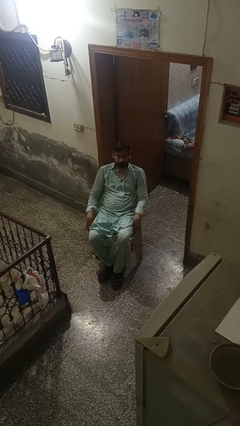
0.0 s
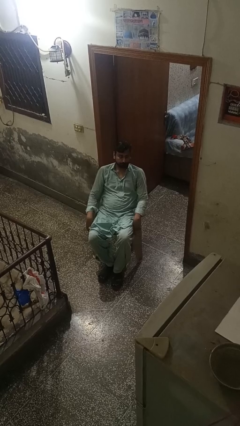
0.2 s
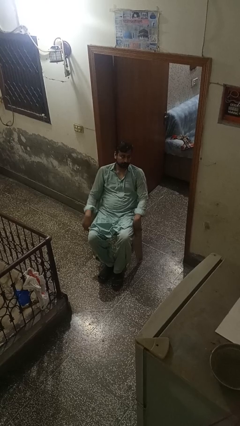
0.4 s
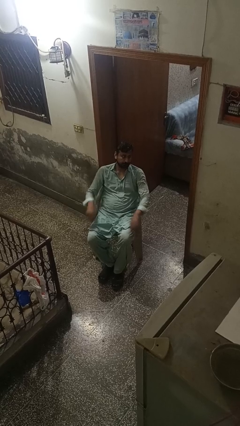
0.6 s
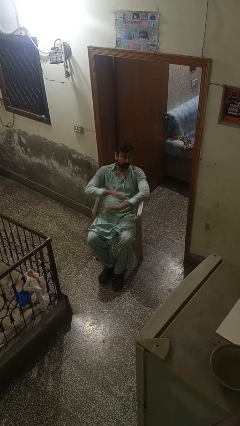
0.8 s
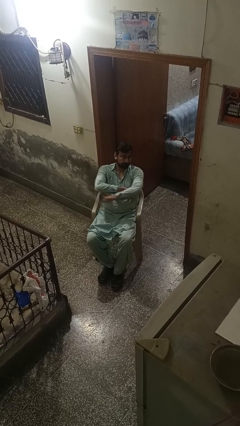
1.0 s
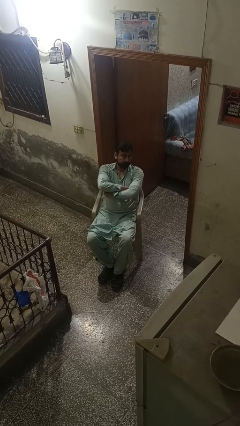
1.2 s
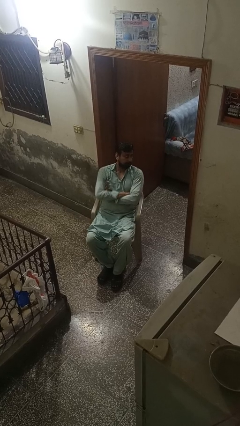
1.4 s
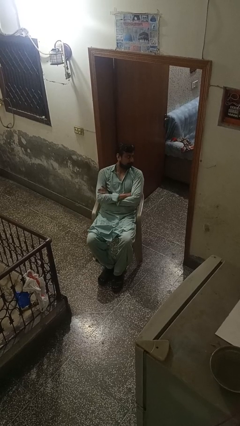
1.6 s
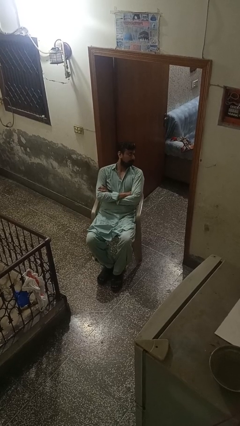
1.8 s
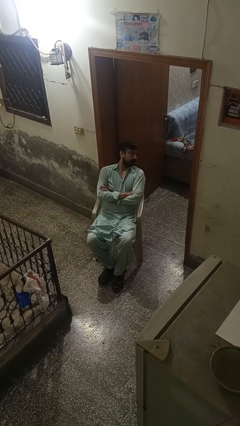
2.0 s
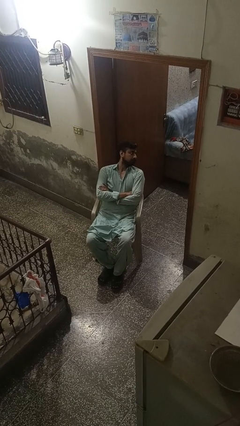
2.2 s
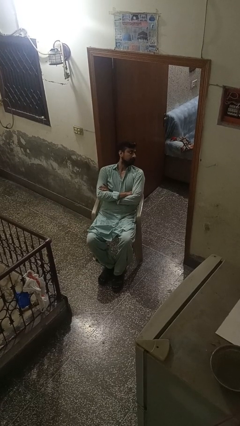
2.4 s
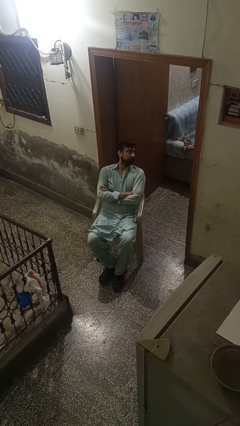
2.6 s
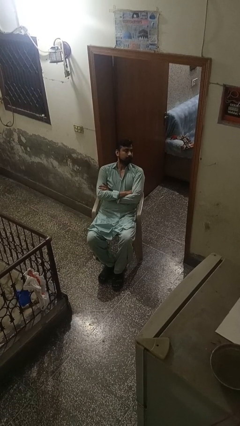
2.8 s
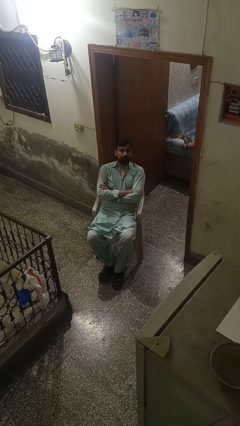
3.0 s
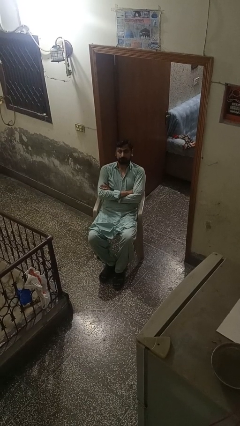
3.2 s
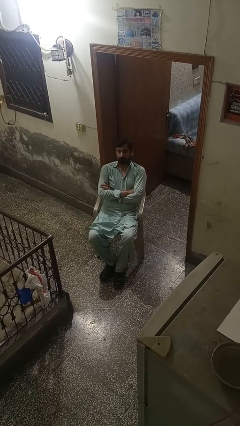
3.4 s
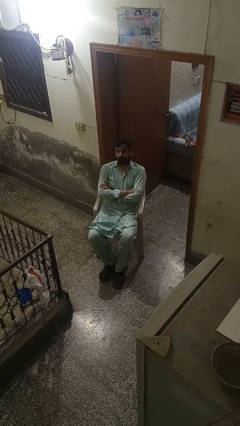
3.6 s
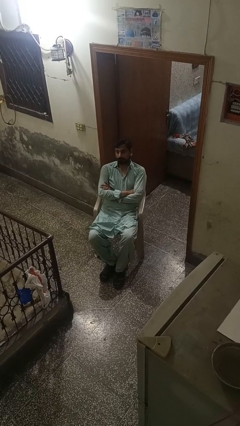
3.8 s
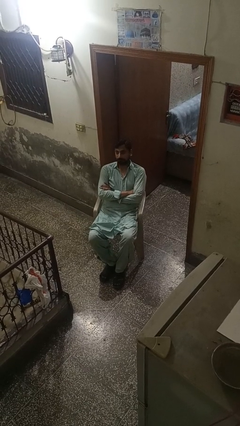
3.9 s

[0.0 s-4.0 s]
person crosses arms

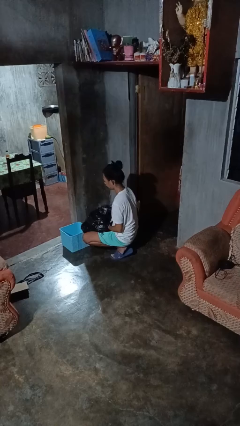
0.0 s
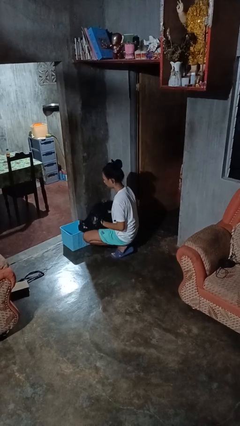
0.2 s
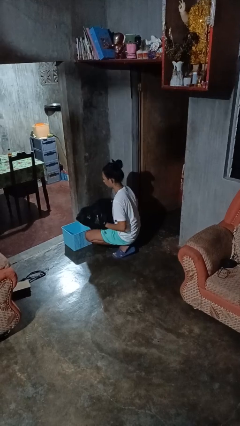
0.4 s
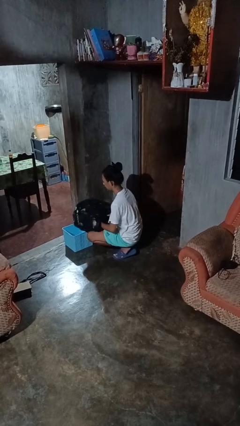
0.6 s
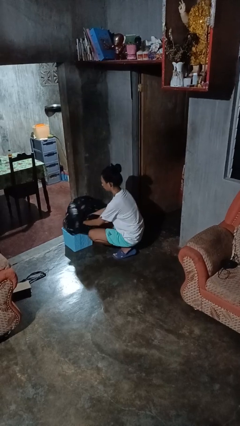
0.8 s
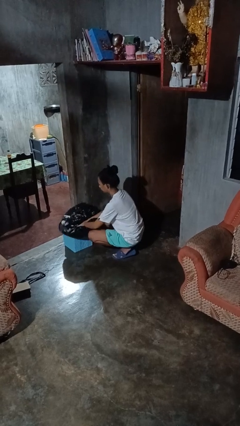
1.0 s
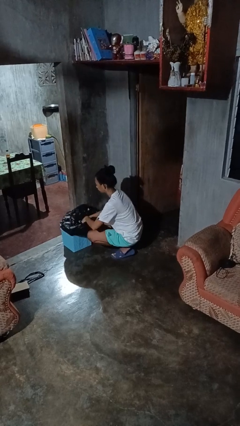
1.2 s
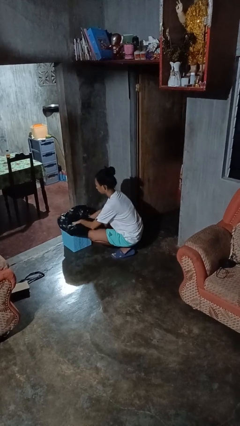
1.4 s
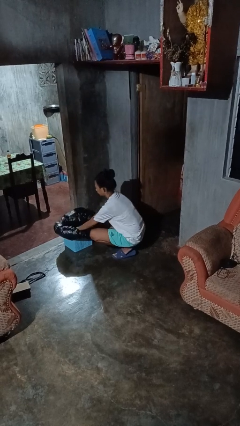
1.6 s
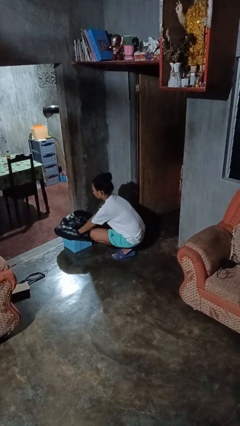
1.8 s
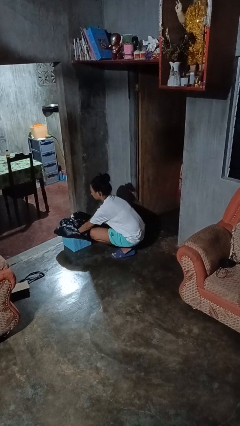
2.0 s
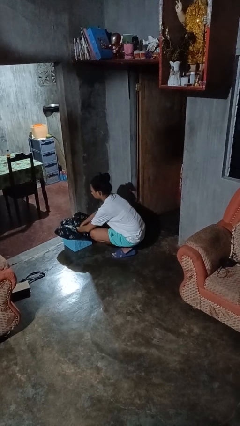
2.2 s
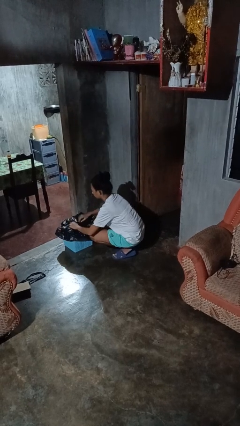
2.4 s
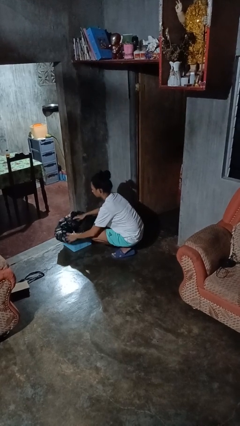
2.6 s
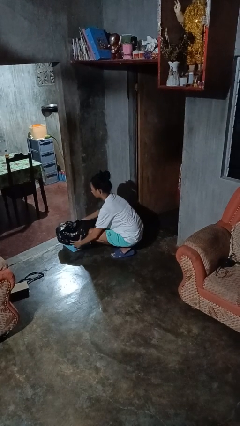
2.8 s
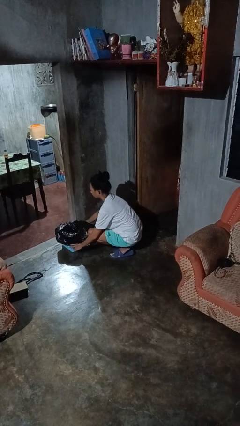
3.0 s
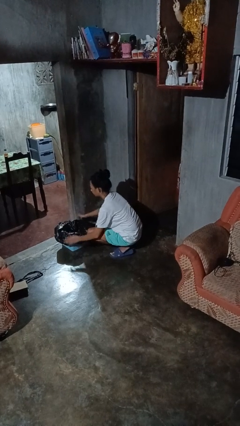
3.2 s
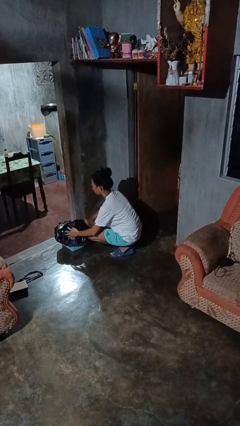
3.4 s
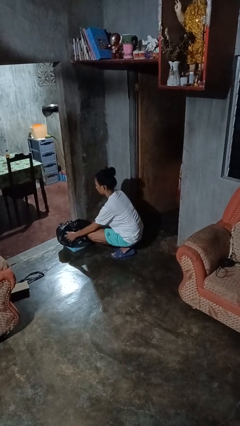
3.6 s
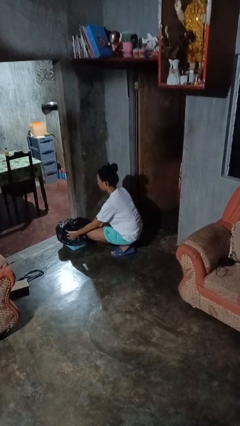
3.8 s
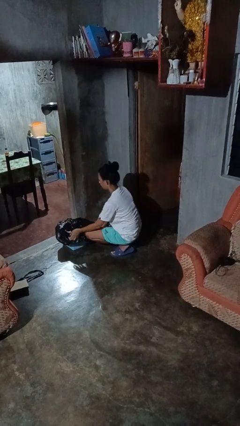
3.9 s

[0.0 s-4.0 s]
person inserts trashbag into trashcan

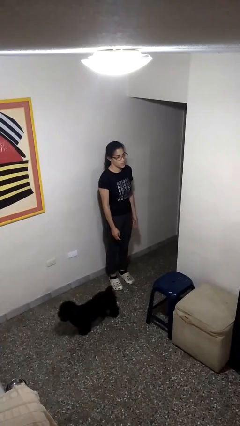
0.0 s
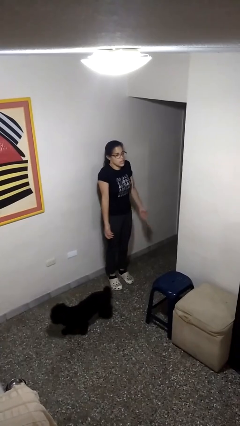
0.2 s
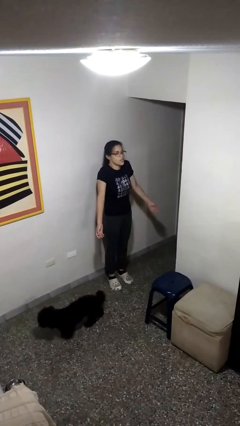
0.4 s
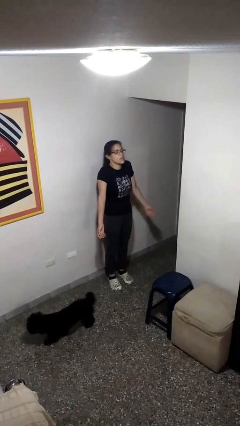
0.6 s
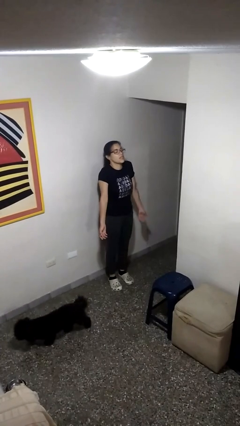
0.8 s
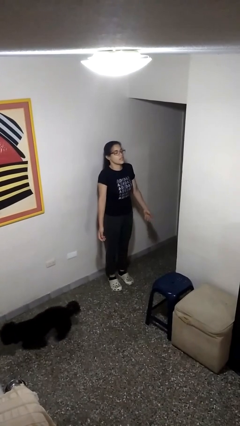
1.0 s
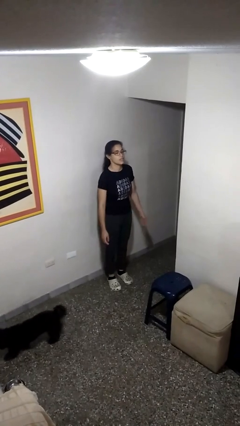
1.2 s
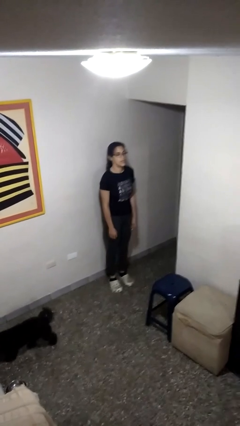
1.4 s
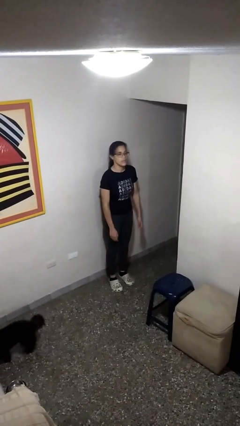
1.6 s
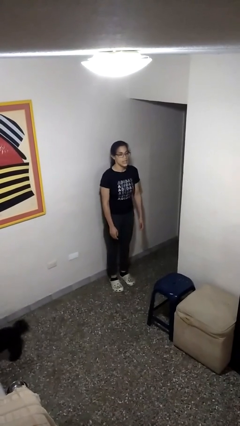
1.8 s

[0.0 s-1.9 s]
person shrugs

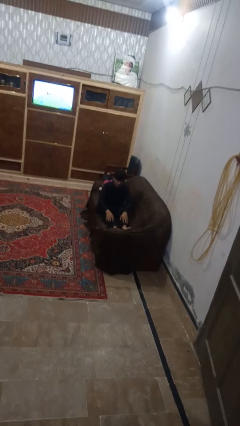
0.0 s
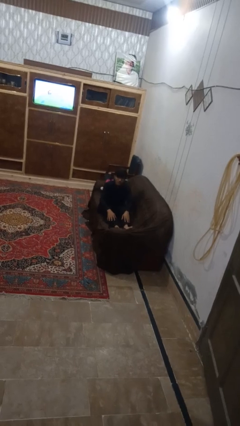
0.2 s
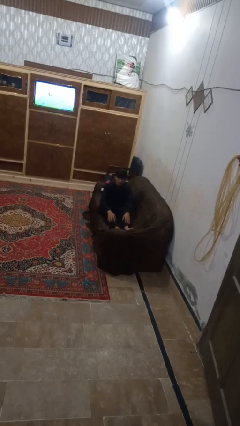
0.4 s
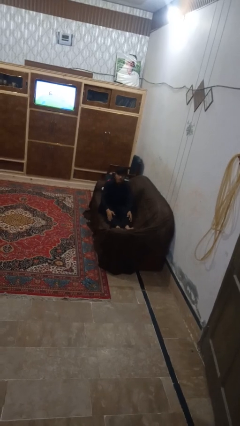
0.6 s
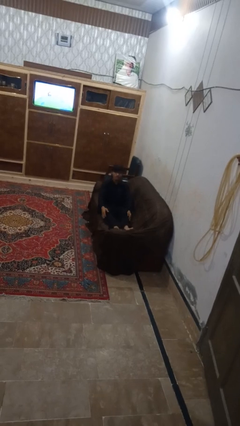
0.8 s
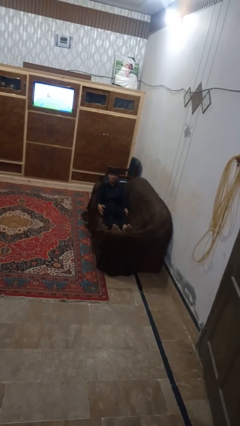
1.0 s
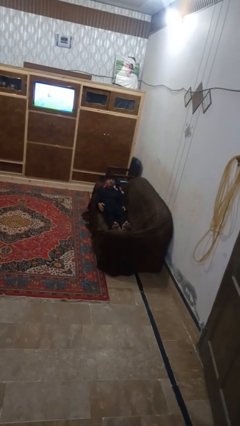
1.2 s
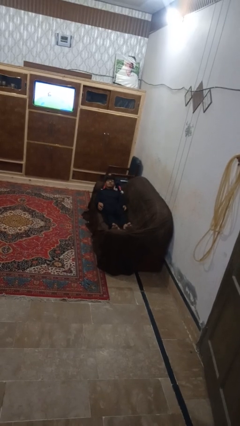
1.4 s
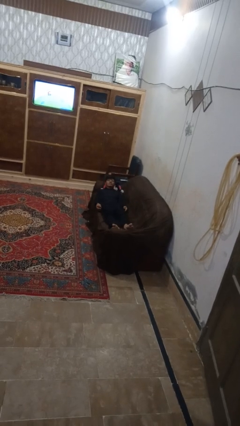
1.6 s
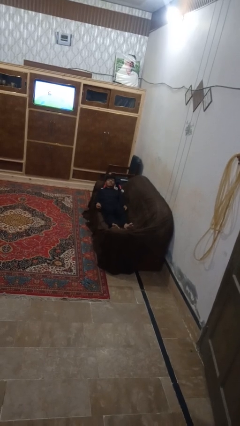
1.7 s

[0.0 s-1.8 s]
person lies down on couch

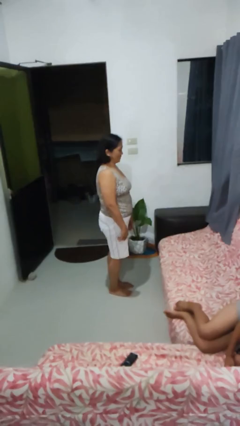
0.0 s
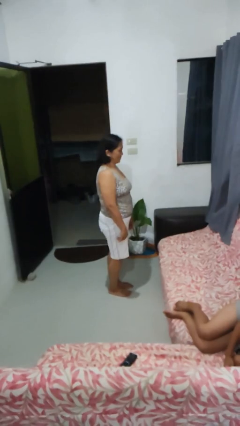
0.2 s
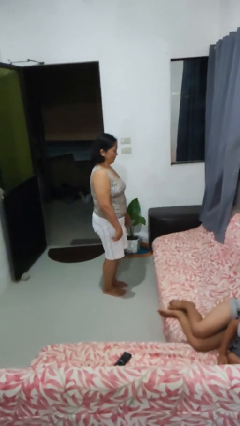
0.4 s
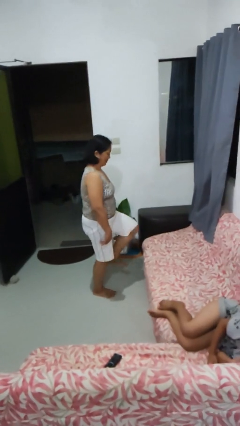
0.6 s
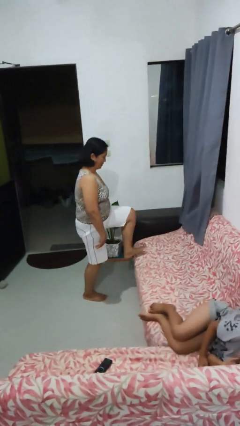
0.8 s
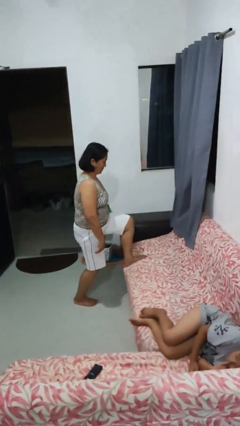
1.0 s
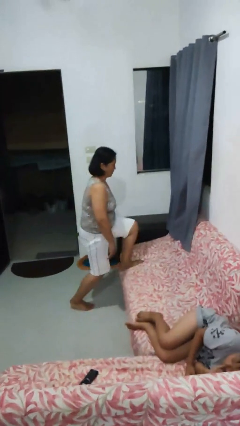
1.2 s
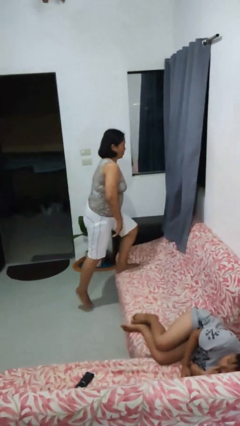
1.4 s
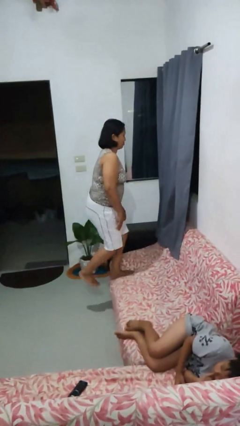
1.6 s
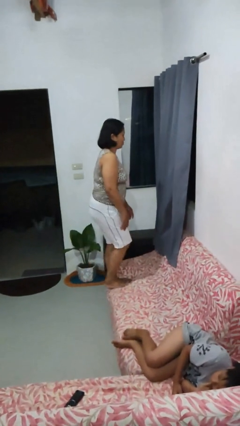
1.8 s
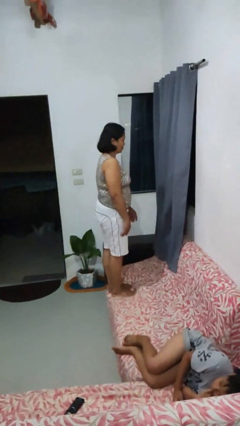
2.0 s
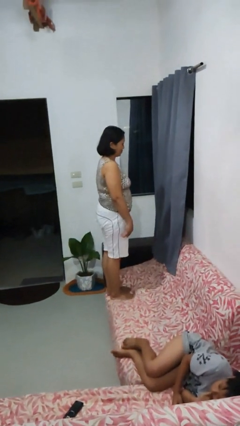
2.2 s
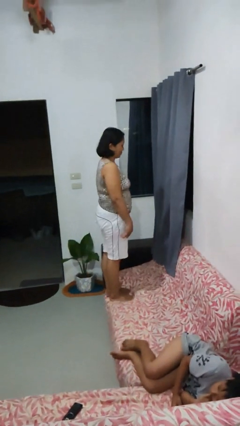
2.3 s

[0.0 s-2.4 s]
person climbs on couch

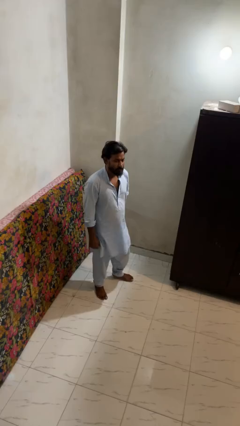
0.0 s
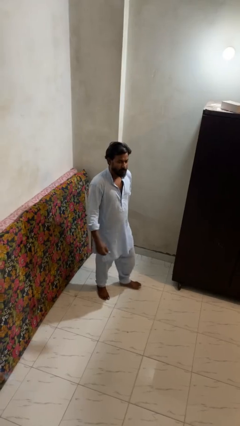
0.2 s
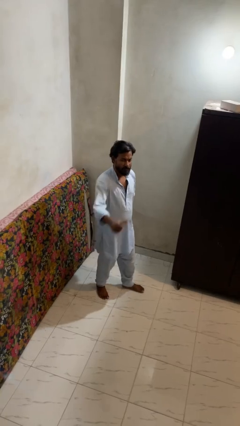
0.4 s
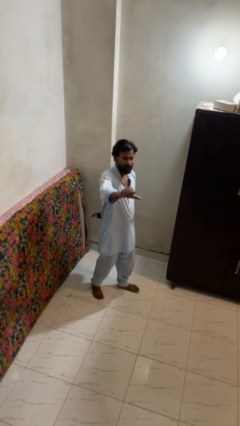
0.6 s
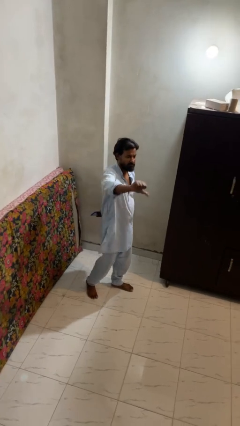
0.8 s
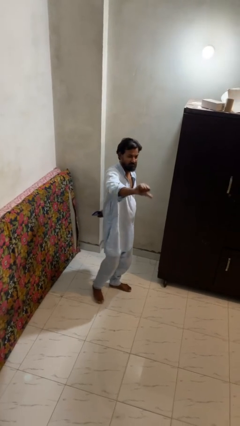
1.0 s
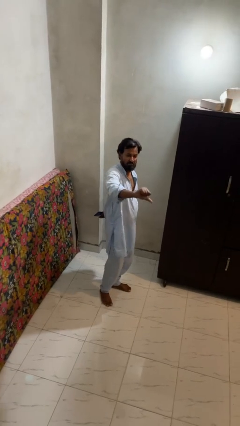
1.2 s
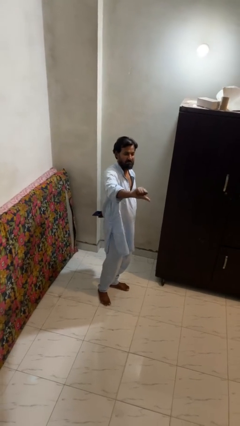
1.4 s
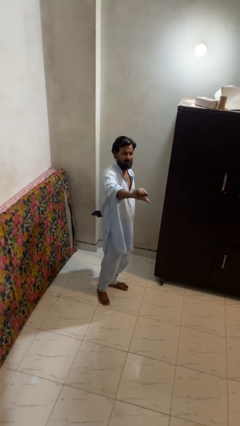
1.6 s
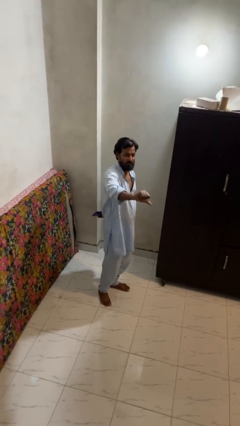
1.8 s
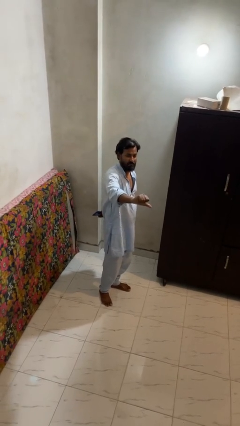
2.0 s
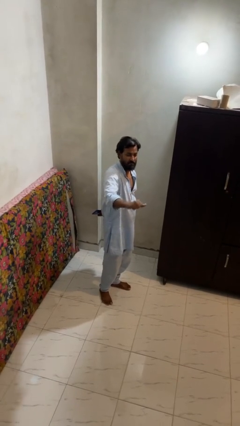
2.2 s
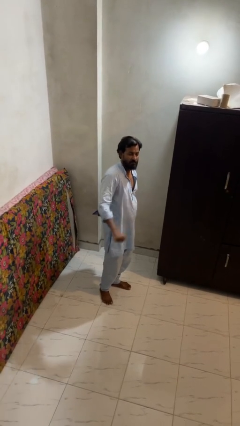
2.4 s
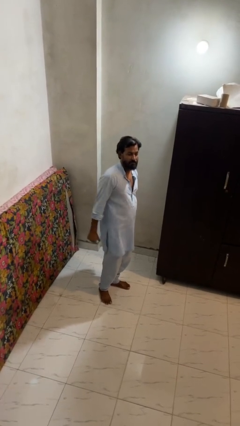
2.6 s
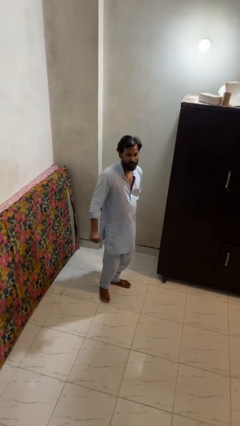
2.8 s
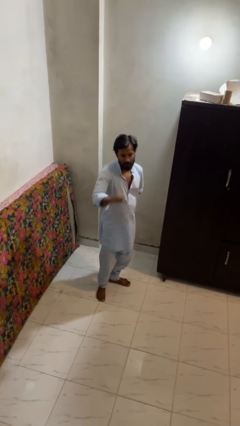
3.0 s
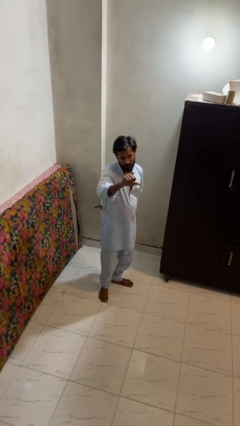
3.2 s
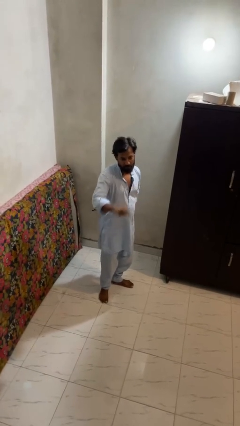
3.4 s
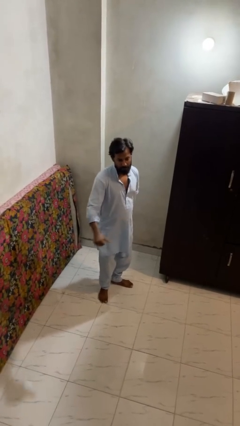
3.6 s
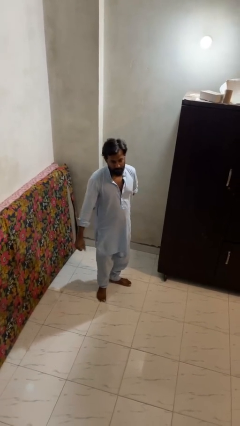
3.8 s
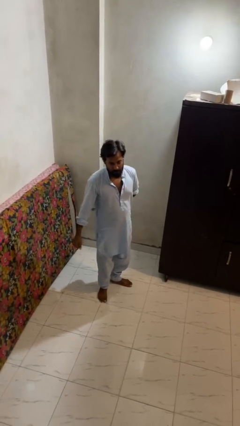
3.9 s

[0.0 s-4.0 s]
person gestures thumbs down
